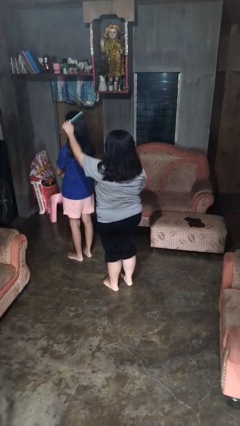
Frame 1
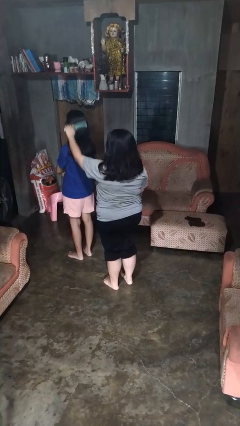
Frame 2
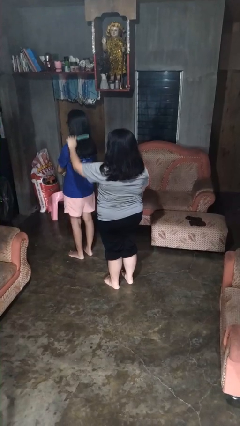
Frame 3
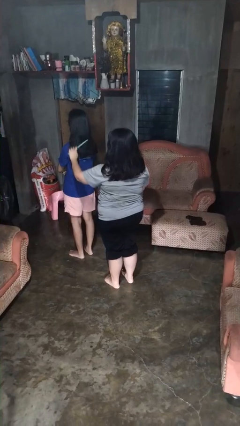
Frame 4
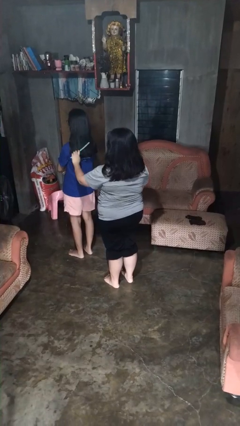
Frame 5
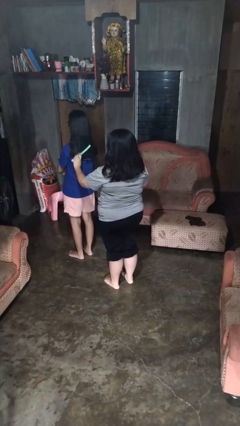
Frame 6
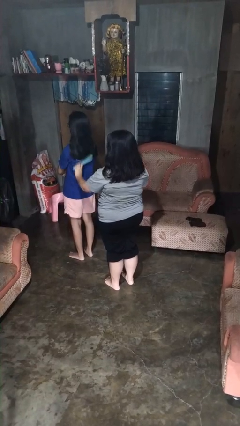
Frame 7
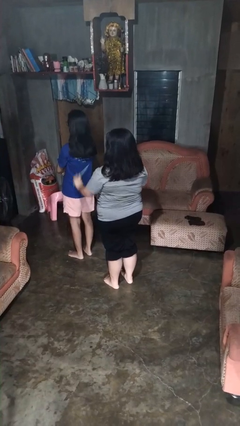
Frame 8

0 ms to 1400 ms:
person brushes hair of person

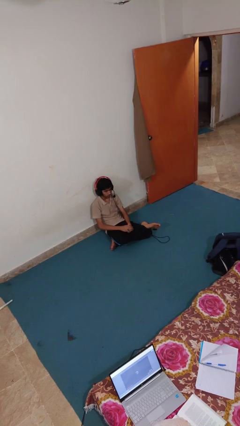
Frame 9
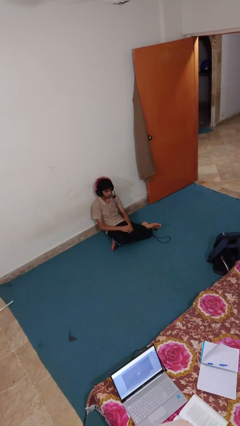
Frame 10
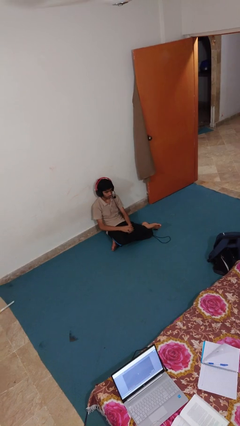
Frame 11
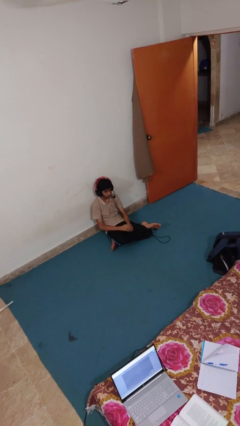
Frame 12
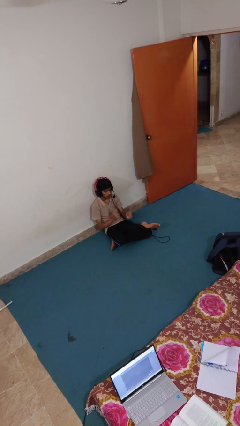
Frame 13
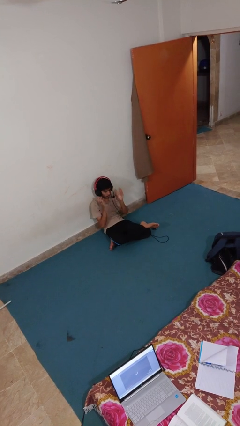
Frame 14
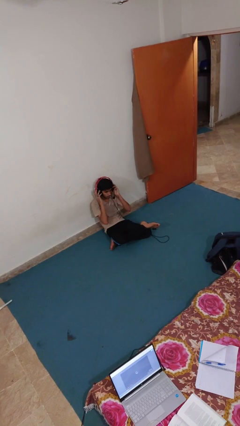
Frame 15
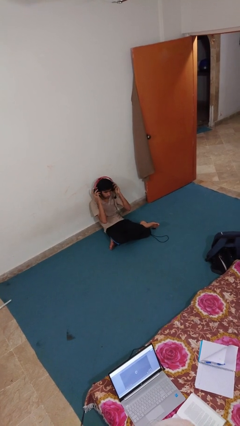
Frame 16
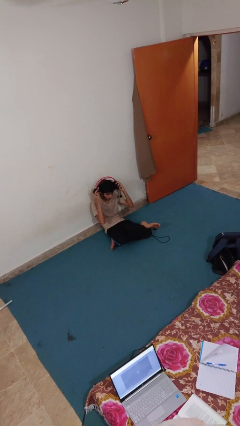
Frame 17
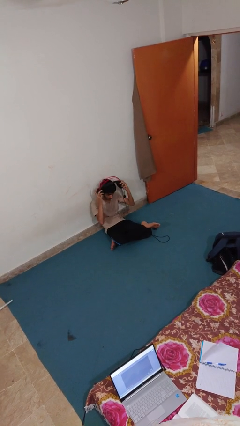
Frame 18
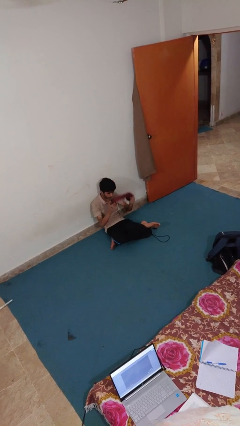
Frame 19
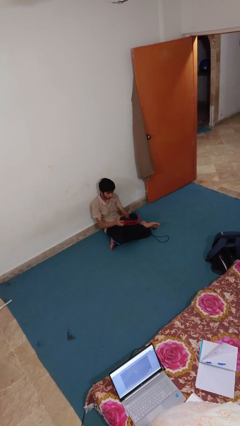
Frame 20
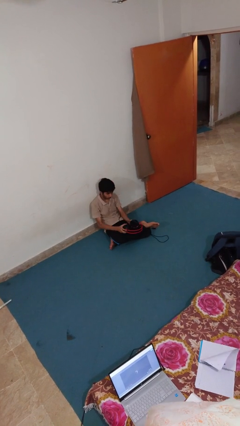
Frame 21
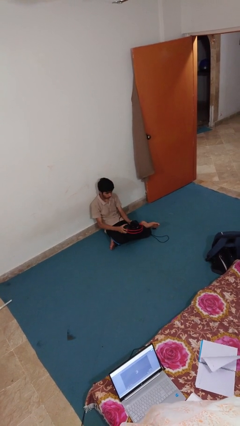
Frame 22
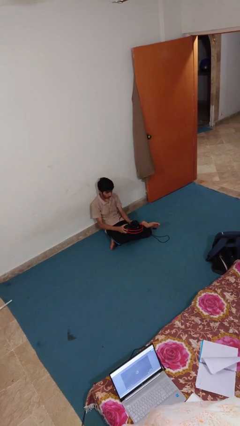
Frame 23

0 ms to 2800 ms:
person takes off headphones

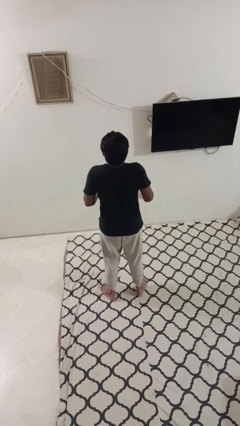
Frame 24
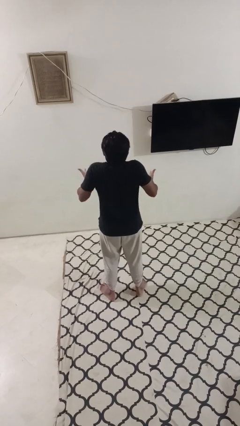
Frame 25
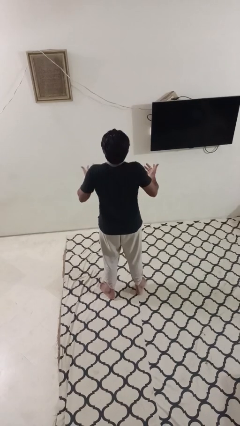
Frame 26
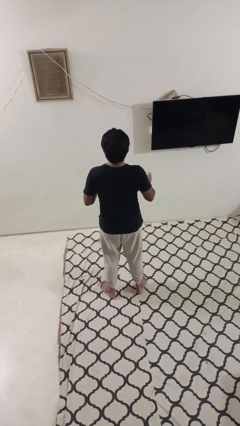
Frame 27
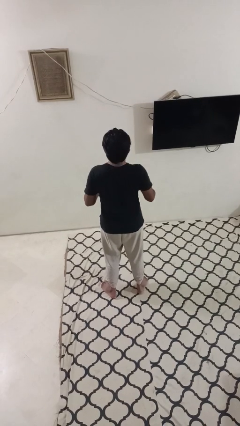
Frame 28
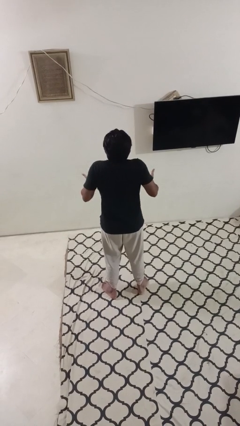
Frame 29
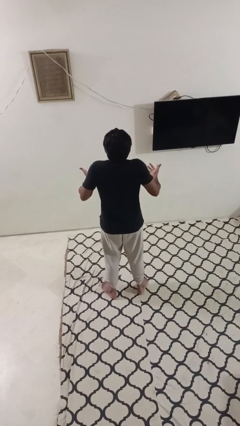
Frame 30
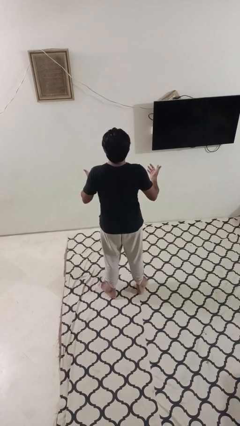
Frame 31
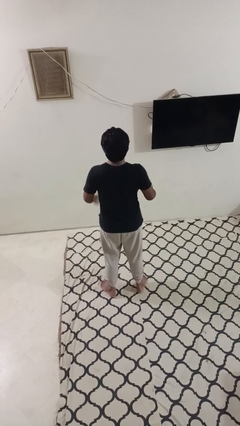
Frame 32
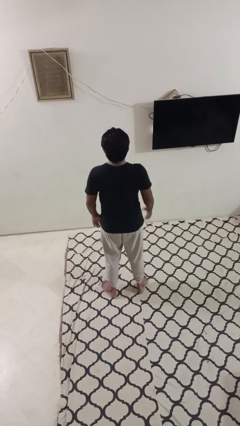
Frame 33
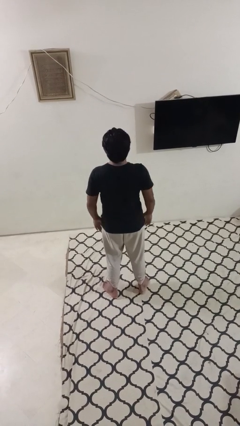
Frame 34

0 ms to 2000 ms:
person shrugs

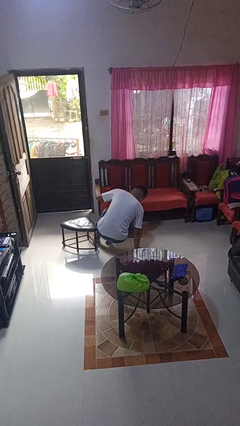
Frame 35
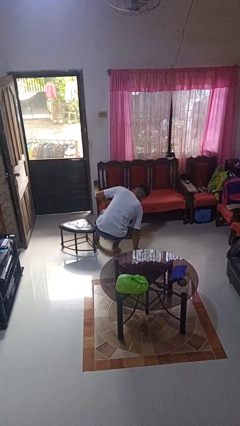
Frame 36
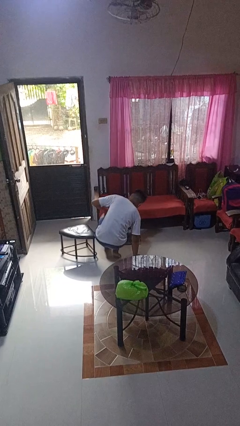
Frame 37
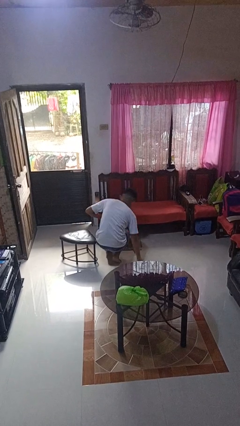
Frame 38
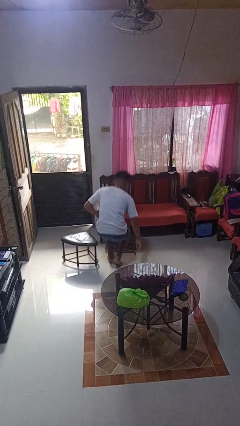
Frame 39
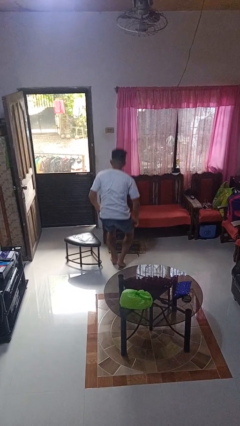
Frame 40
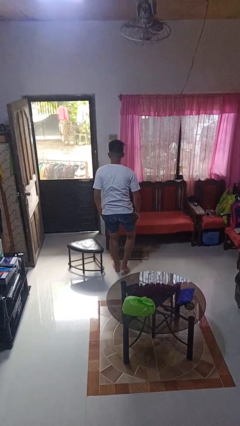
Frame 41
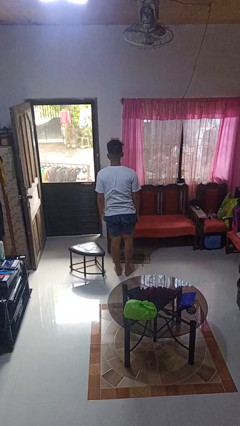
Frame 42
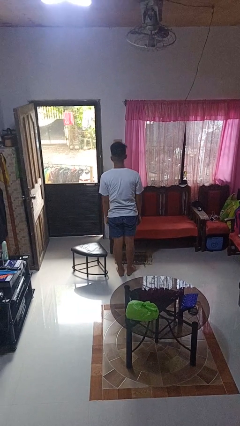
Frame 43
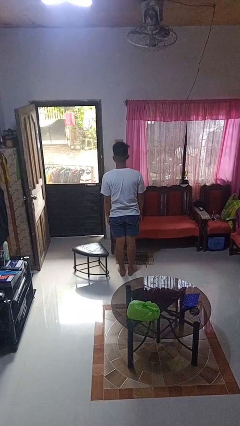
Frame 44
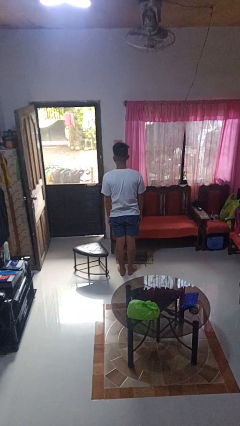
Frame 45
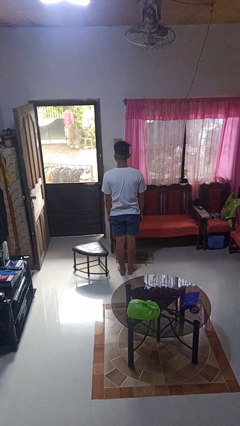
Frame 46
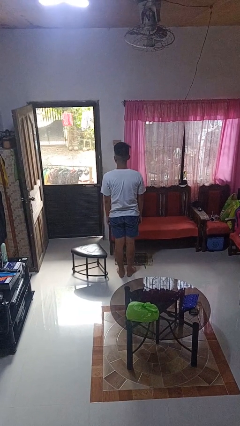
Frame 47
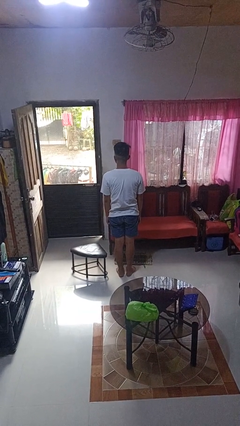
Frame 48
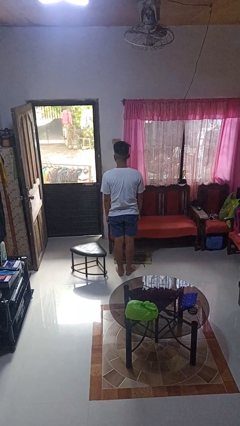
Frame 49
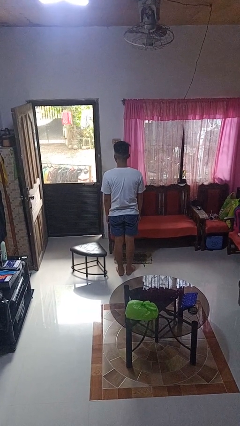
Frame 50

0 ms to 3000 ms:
person stands up from floor

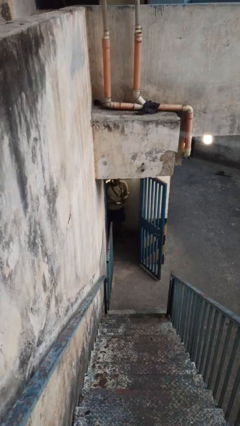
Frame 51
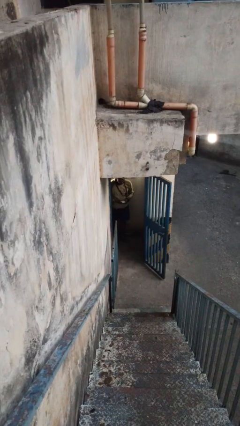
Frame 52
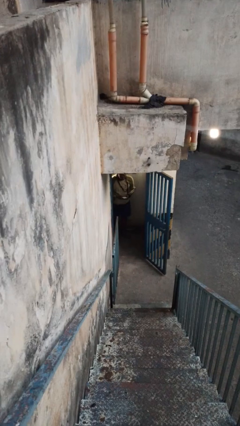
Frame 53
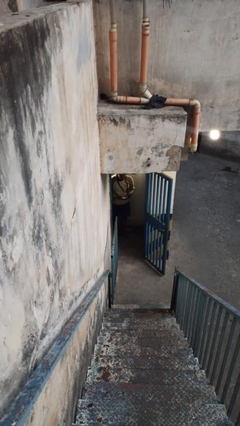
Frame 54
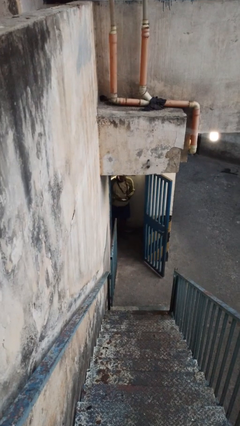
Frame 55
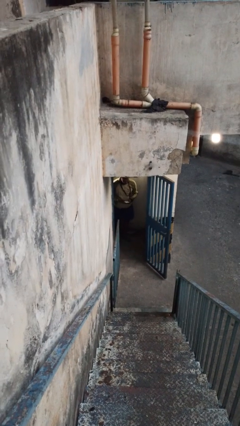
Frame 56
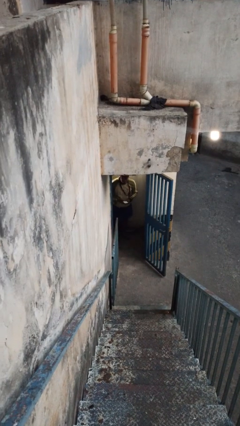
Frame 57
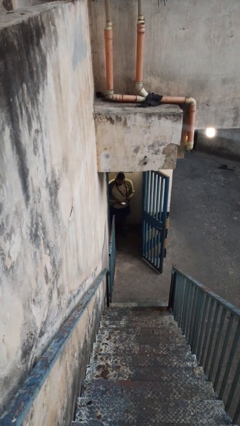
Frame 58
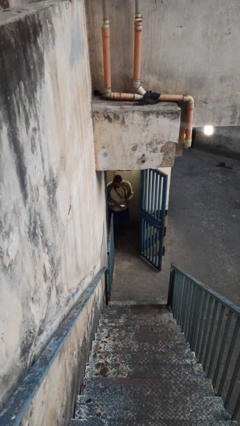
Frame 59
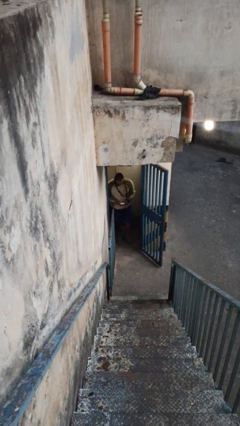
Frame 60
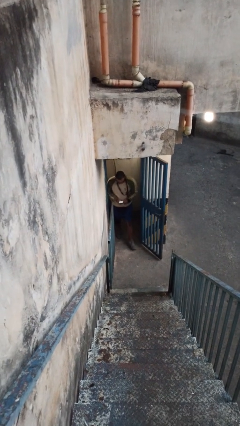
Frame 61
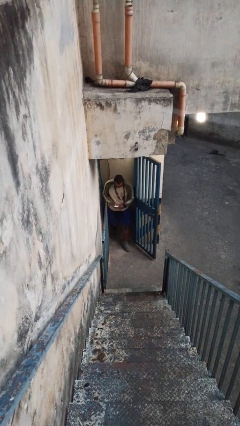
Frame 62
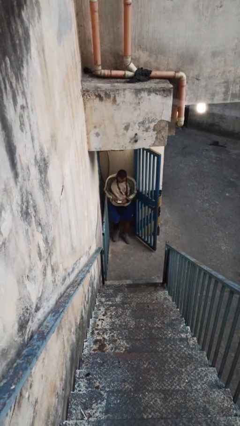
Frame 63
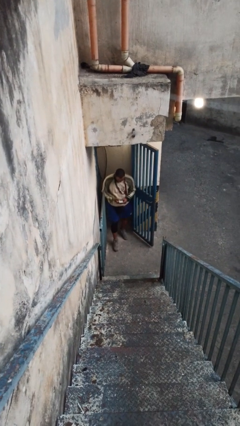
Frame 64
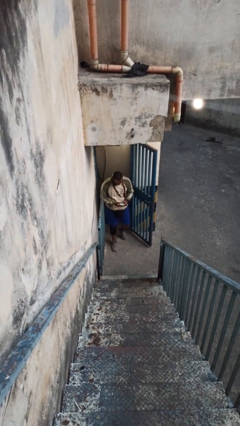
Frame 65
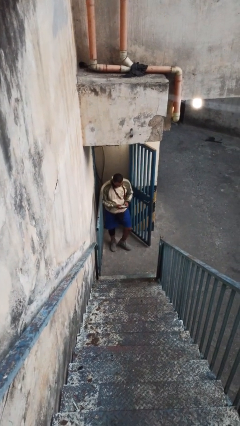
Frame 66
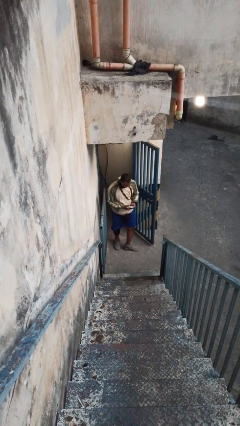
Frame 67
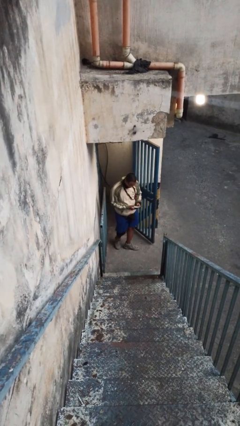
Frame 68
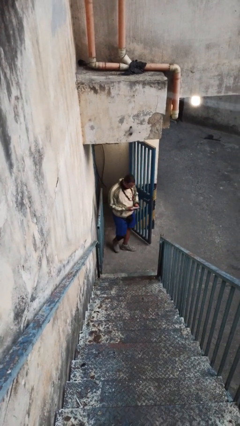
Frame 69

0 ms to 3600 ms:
person enters scene through structure

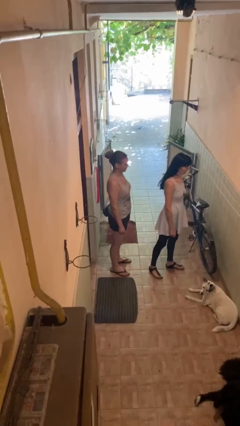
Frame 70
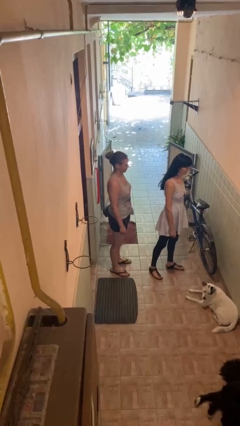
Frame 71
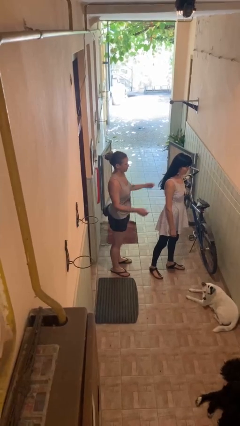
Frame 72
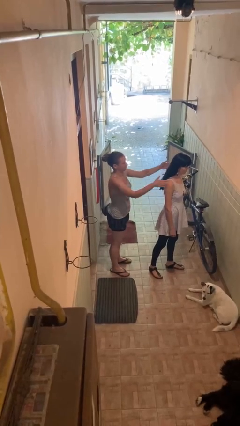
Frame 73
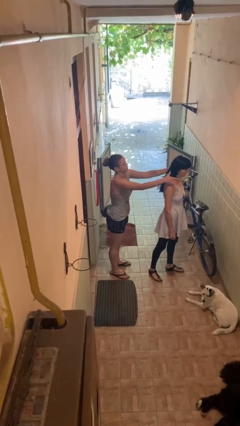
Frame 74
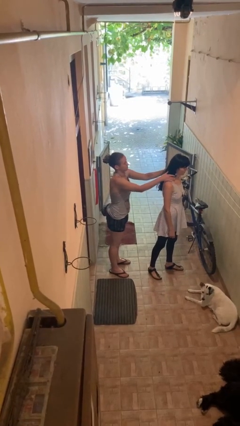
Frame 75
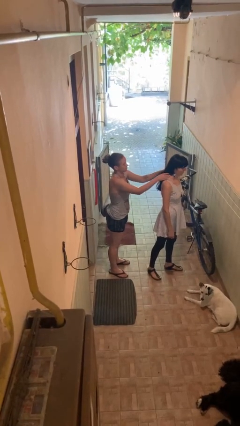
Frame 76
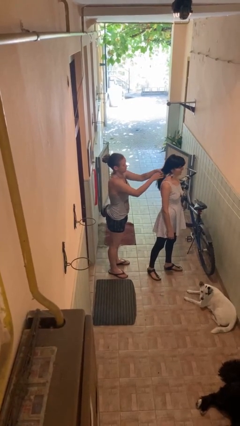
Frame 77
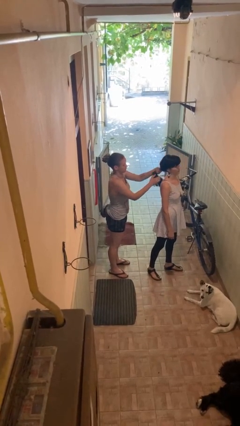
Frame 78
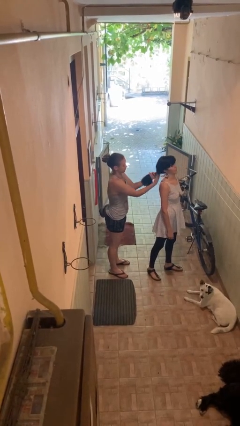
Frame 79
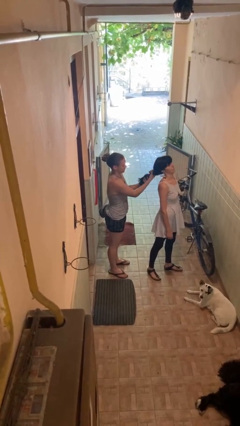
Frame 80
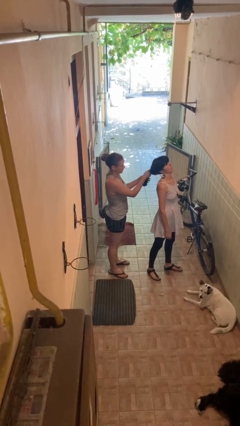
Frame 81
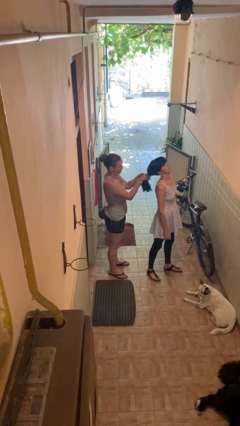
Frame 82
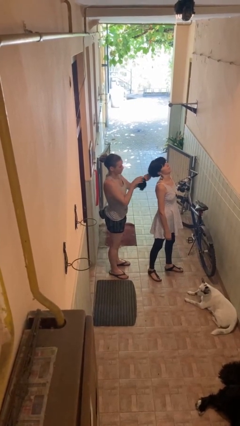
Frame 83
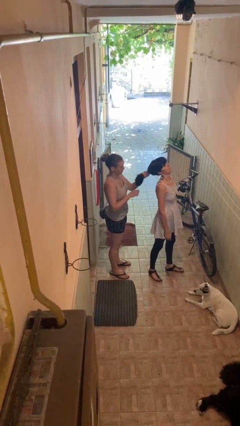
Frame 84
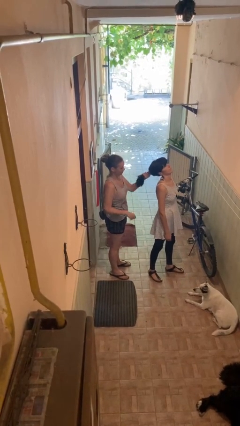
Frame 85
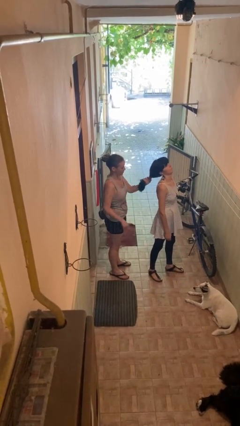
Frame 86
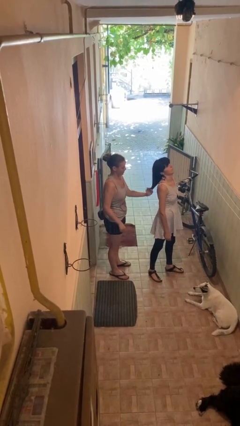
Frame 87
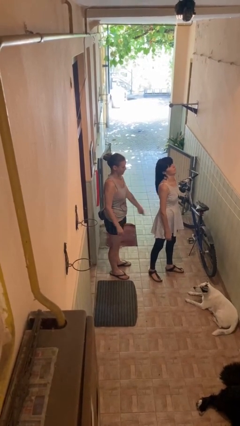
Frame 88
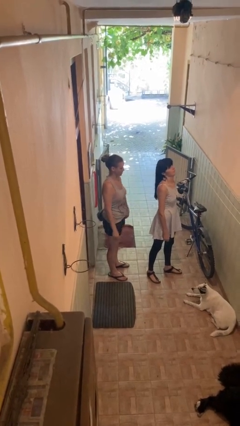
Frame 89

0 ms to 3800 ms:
person grabs person by hair

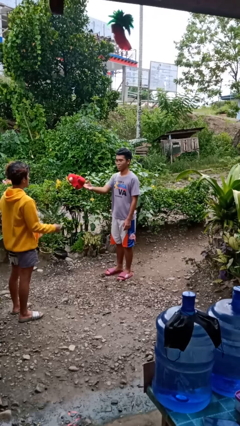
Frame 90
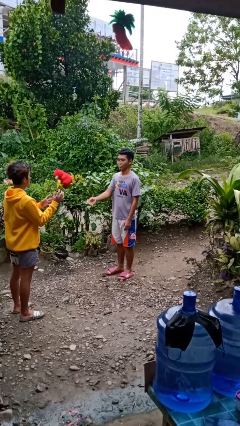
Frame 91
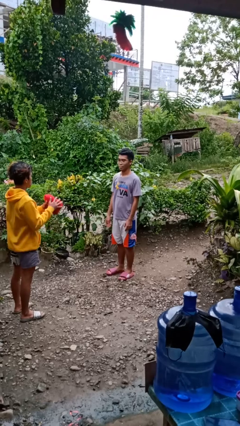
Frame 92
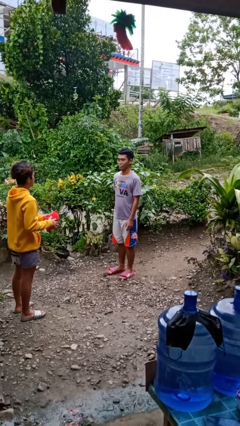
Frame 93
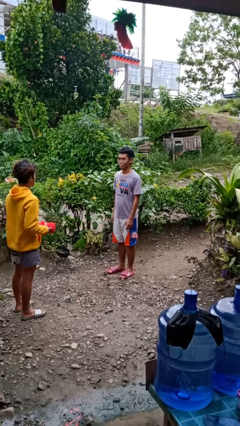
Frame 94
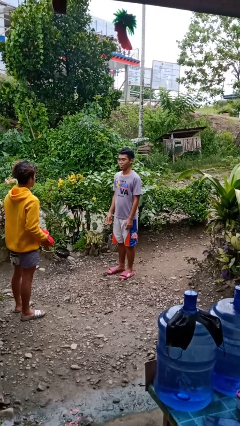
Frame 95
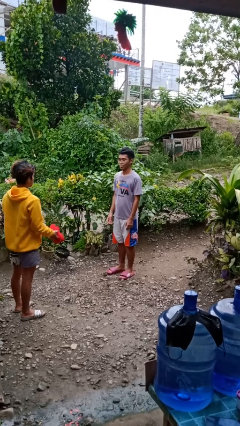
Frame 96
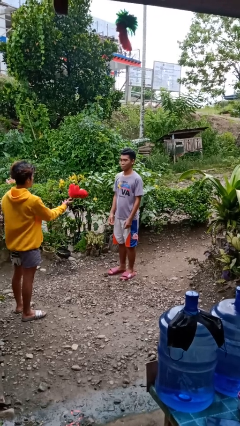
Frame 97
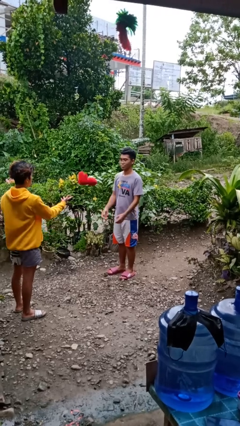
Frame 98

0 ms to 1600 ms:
person throws object to person
